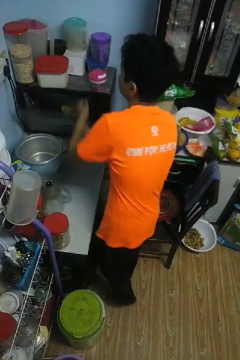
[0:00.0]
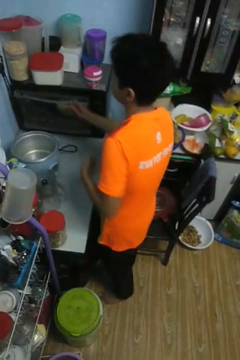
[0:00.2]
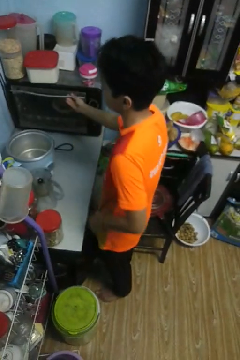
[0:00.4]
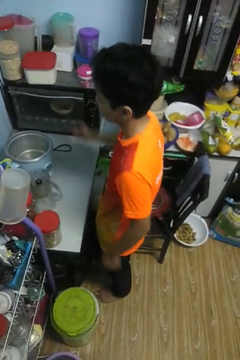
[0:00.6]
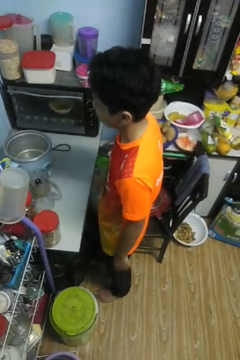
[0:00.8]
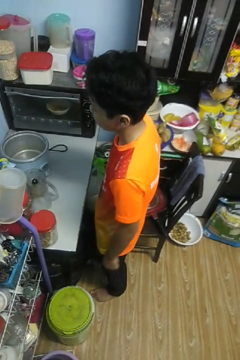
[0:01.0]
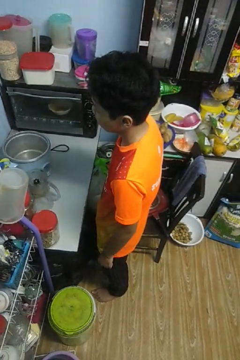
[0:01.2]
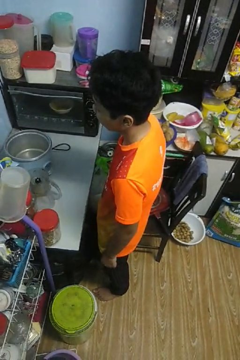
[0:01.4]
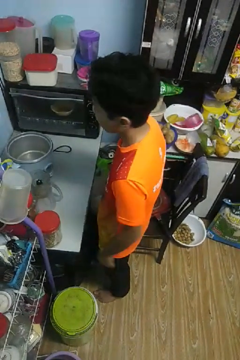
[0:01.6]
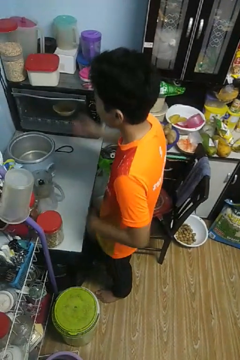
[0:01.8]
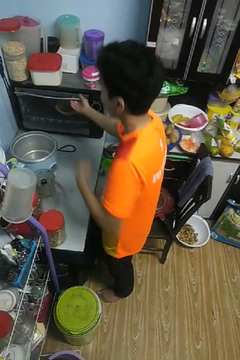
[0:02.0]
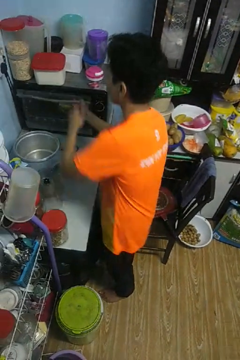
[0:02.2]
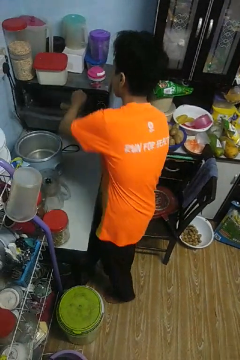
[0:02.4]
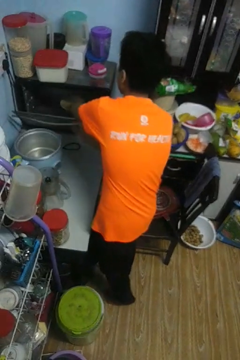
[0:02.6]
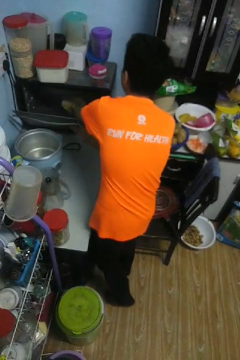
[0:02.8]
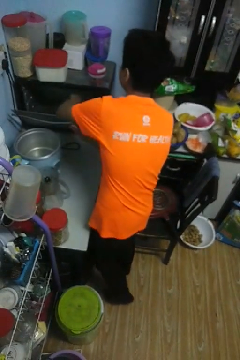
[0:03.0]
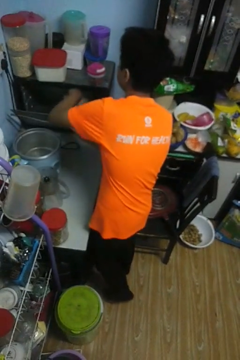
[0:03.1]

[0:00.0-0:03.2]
person takes object from oven

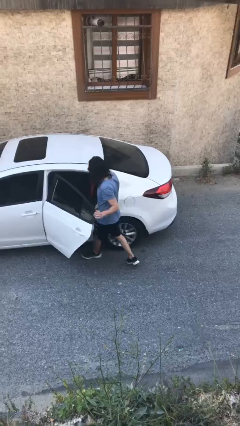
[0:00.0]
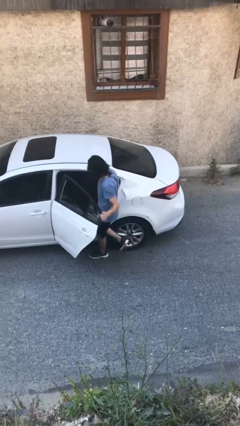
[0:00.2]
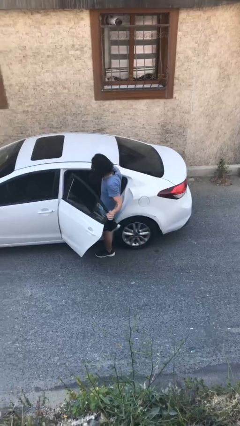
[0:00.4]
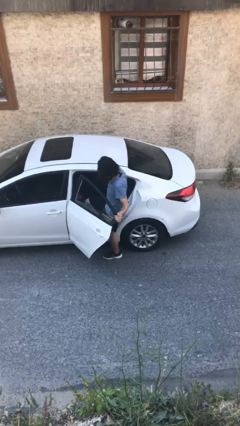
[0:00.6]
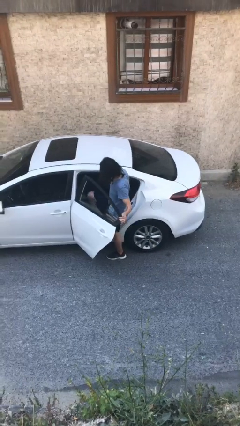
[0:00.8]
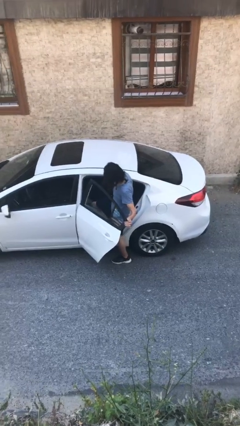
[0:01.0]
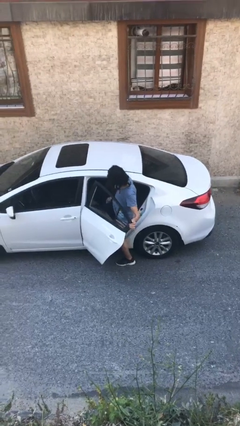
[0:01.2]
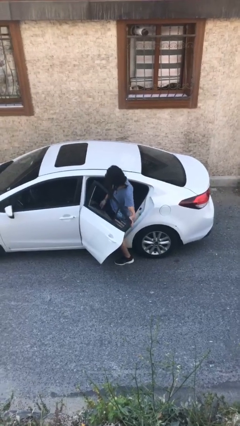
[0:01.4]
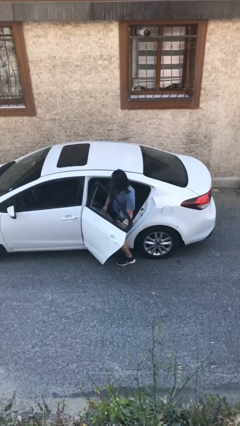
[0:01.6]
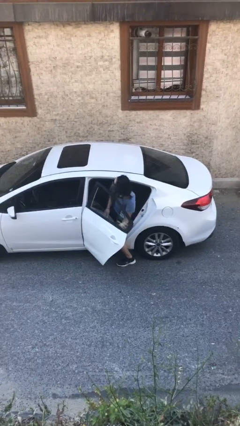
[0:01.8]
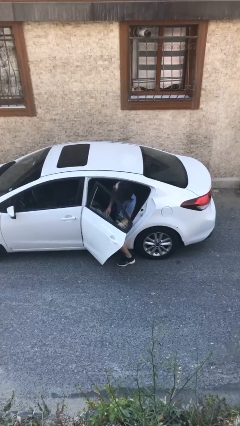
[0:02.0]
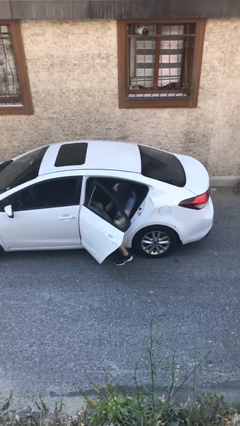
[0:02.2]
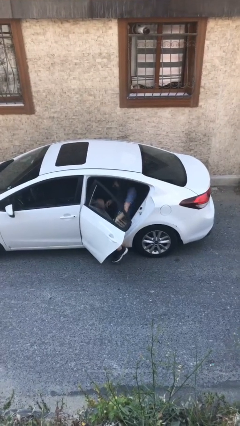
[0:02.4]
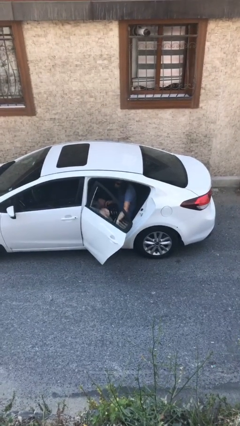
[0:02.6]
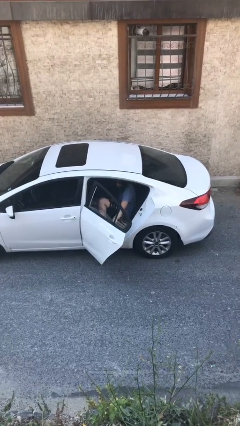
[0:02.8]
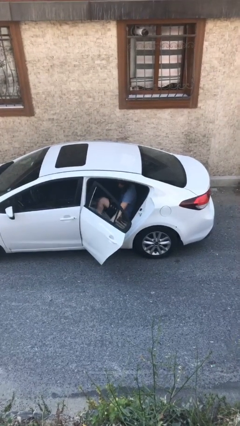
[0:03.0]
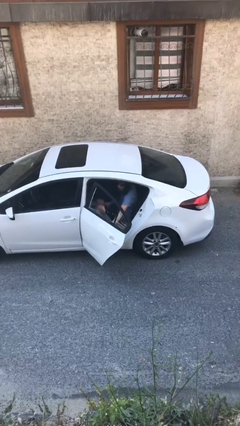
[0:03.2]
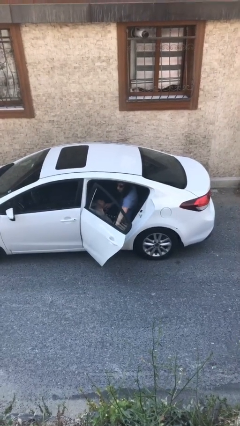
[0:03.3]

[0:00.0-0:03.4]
person enters car

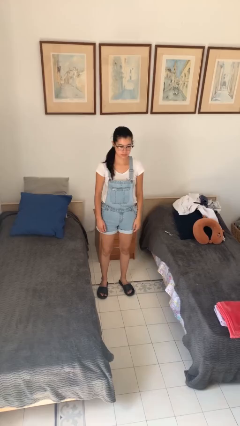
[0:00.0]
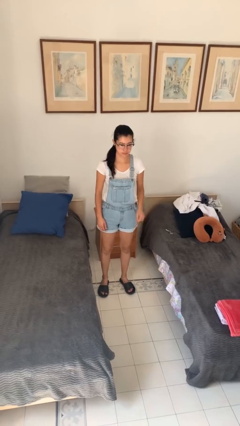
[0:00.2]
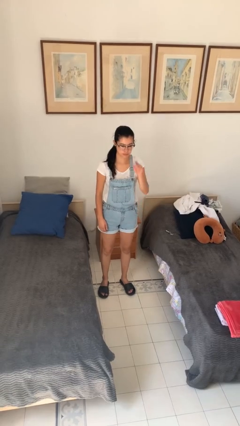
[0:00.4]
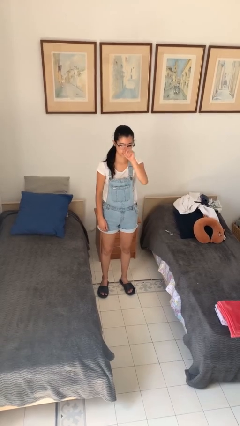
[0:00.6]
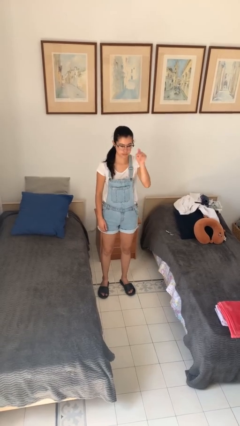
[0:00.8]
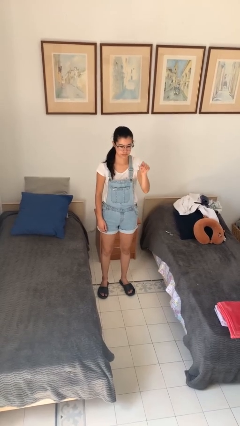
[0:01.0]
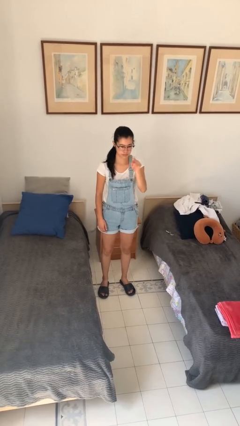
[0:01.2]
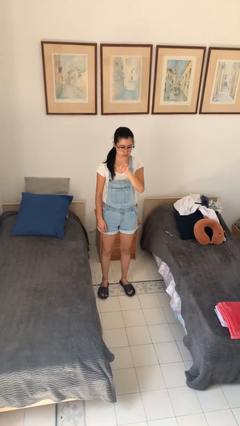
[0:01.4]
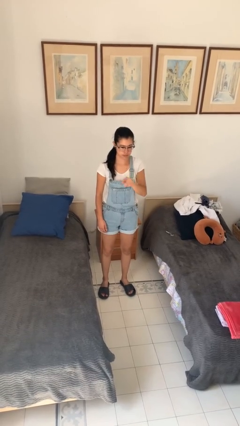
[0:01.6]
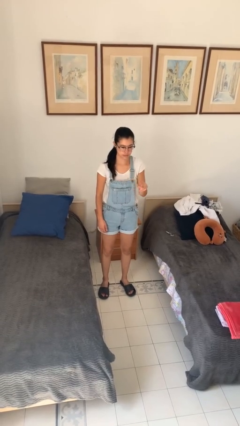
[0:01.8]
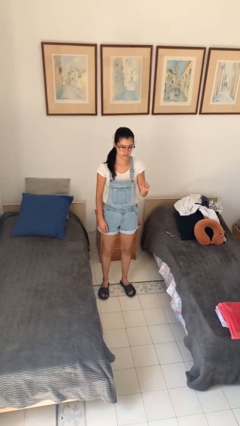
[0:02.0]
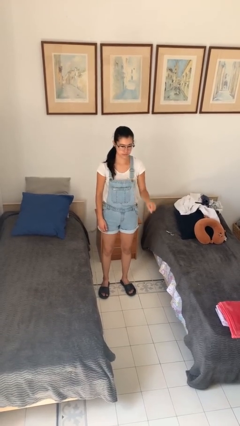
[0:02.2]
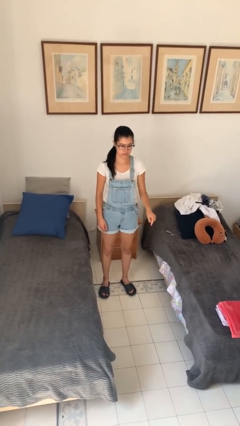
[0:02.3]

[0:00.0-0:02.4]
person gestures number five

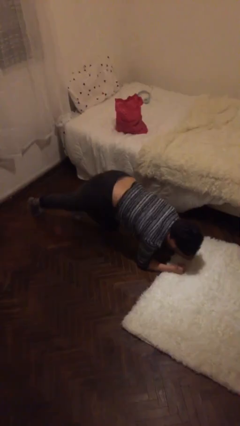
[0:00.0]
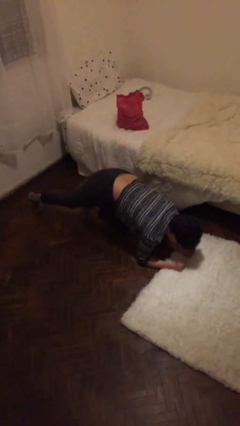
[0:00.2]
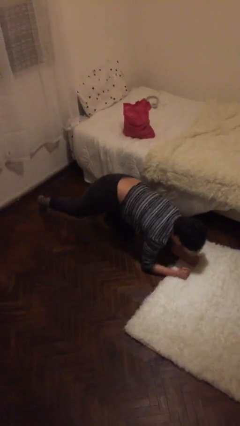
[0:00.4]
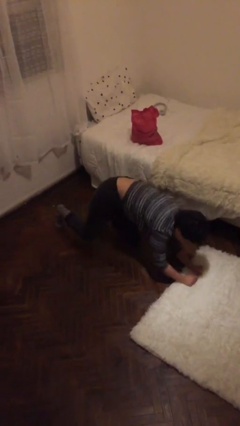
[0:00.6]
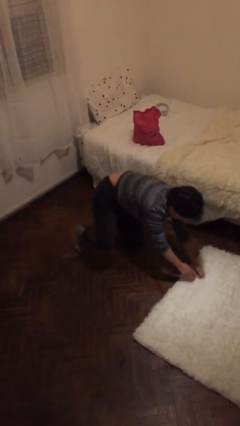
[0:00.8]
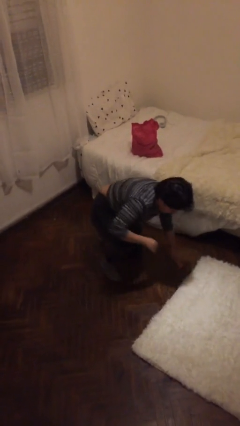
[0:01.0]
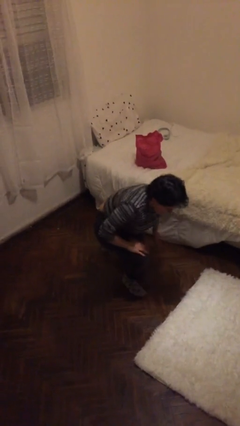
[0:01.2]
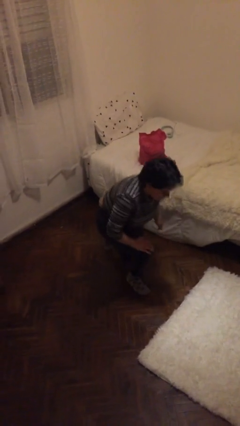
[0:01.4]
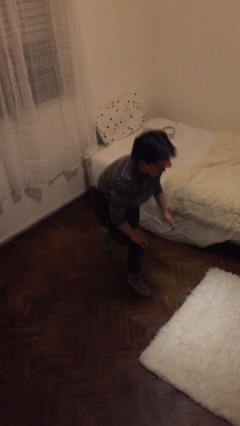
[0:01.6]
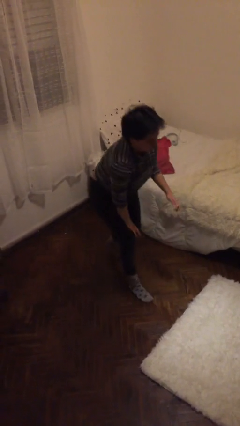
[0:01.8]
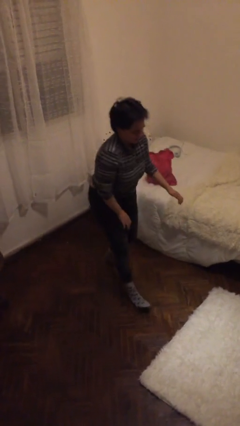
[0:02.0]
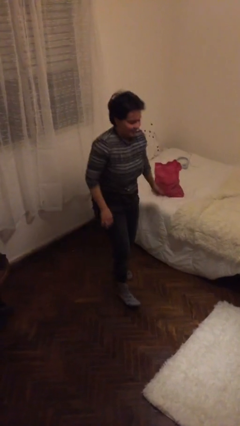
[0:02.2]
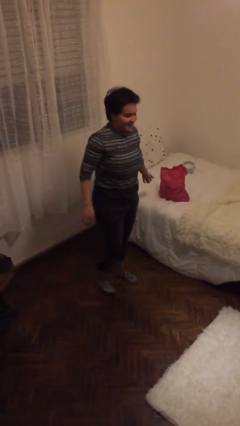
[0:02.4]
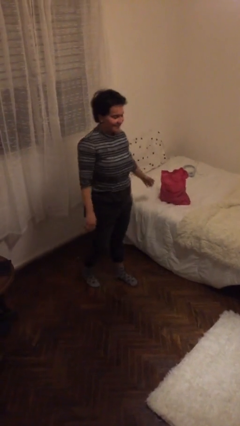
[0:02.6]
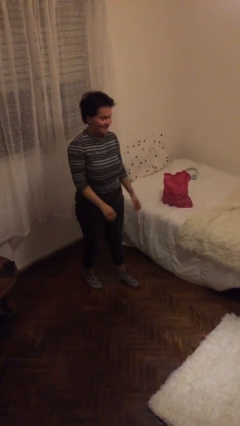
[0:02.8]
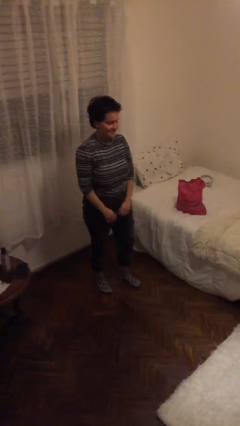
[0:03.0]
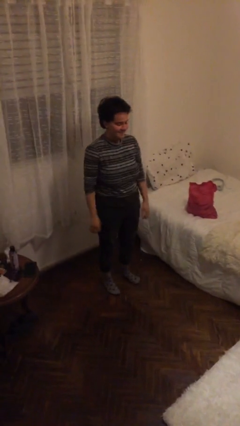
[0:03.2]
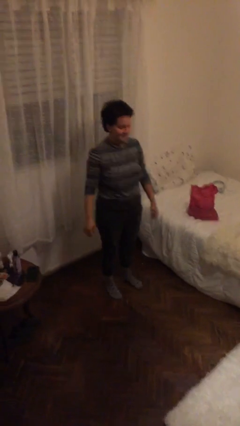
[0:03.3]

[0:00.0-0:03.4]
person stands up from floor

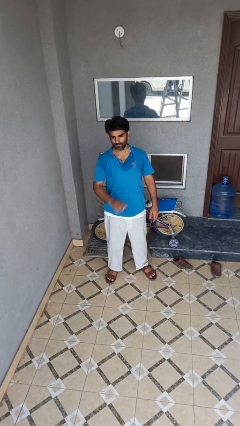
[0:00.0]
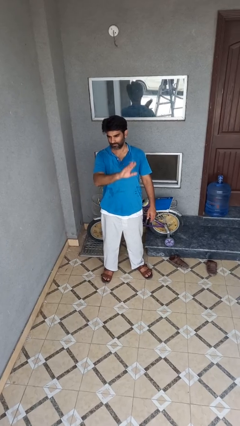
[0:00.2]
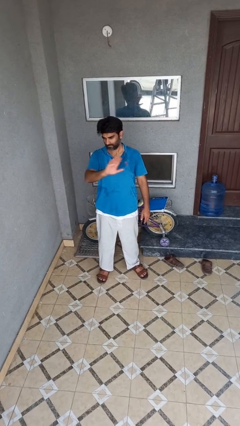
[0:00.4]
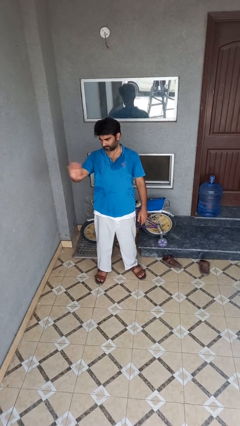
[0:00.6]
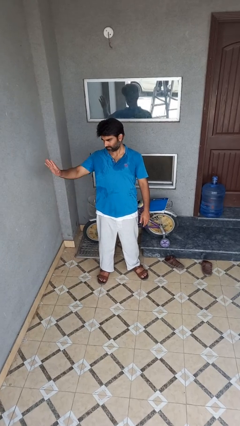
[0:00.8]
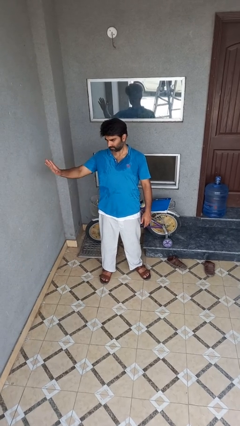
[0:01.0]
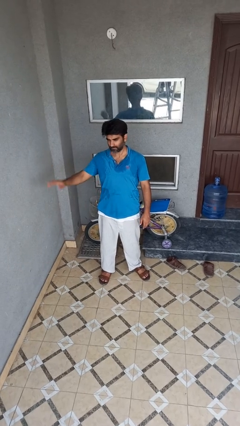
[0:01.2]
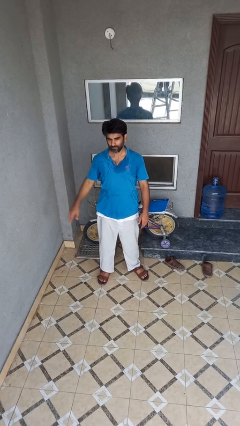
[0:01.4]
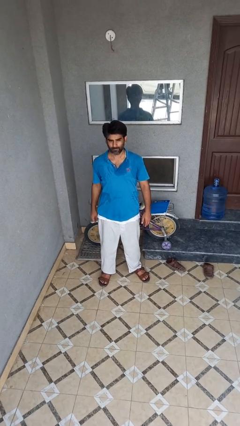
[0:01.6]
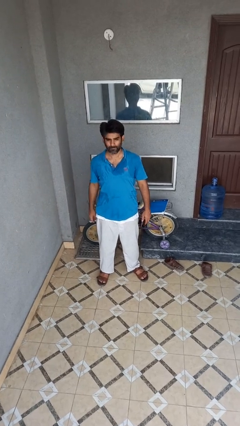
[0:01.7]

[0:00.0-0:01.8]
person gestures swipe right

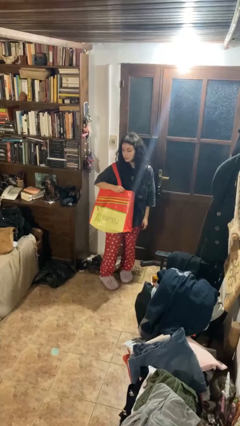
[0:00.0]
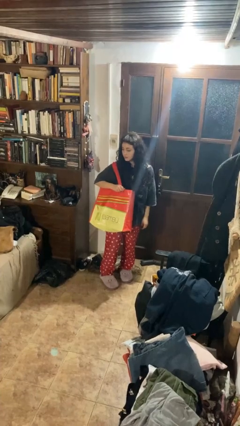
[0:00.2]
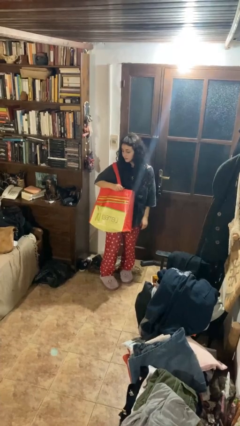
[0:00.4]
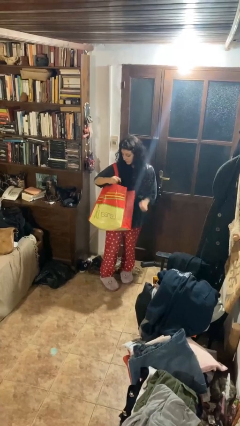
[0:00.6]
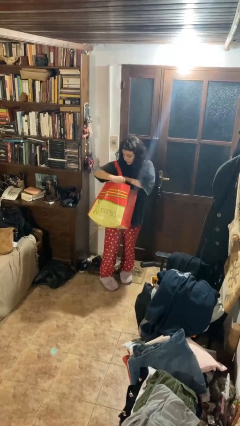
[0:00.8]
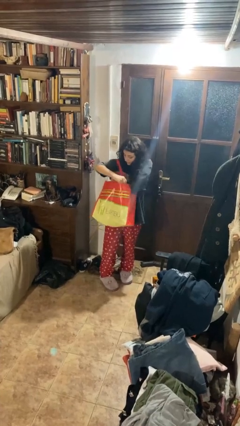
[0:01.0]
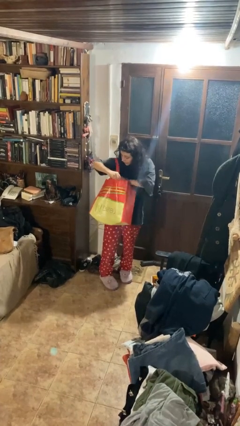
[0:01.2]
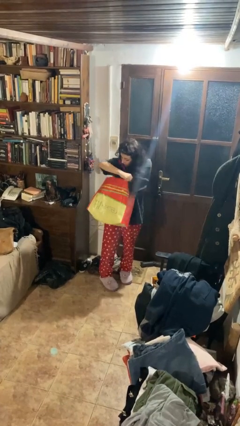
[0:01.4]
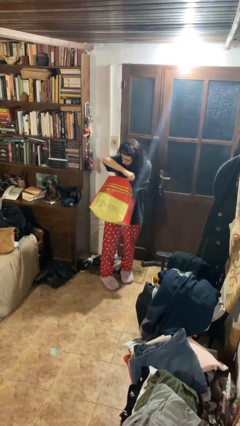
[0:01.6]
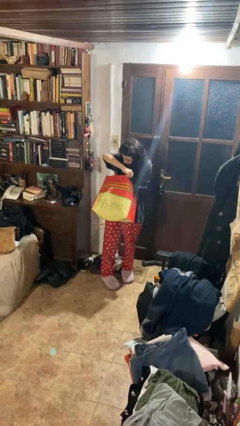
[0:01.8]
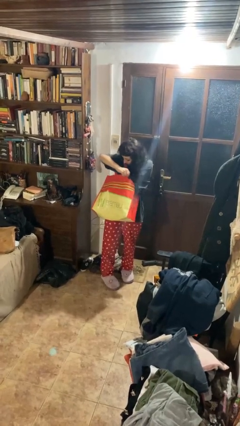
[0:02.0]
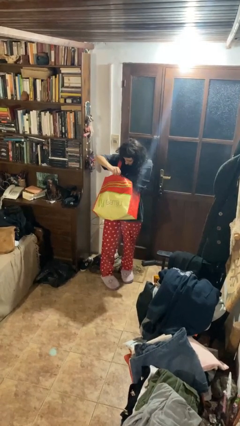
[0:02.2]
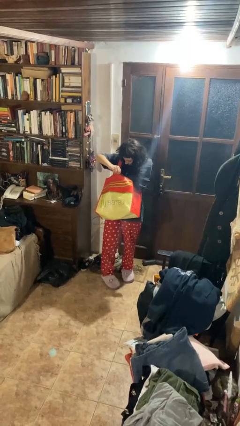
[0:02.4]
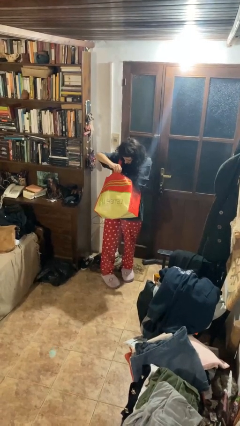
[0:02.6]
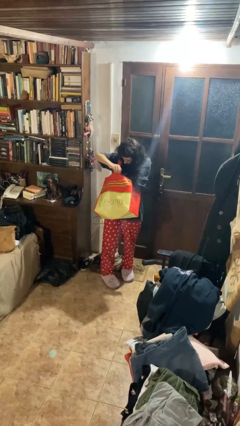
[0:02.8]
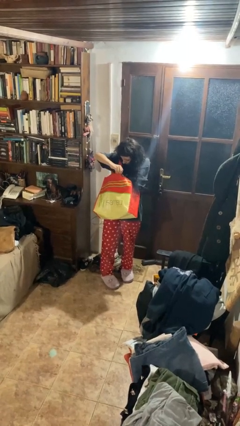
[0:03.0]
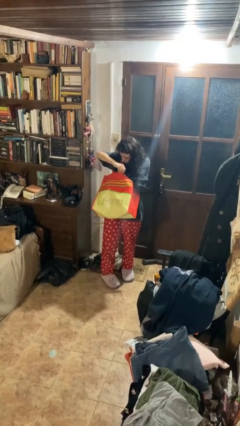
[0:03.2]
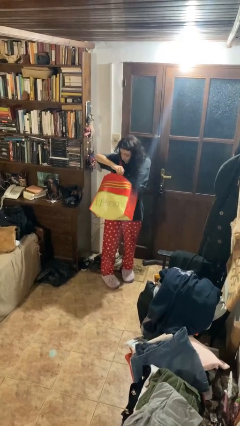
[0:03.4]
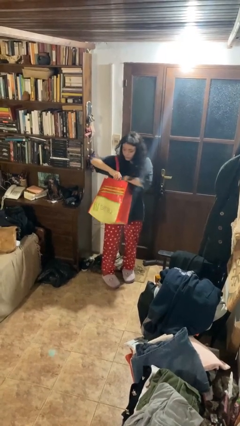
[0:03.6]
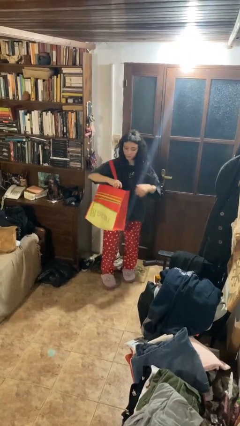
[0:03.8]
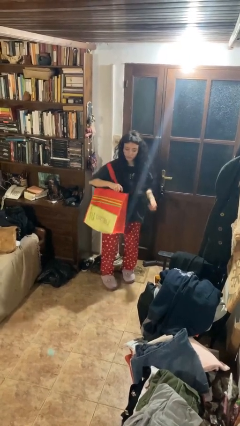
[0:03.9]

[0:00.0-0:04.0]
person searches in bag

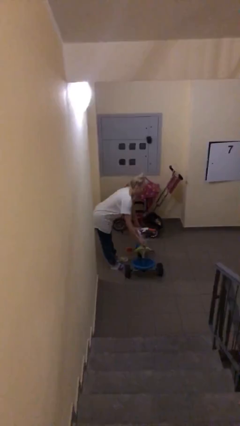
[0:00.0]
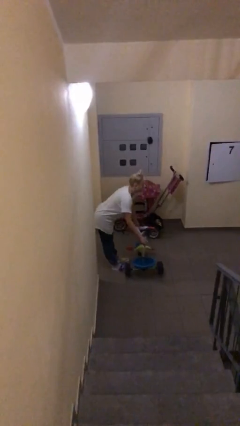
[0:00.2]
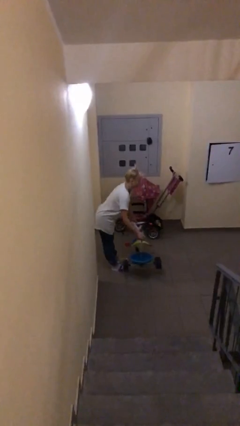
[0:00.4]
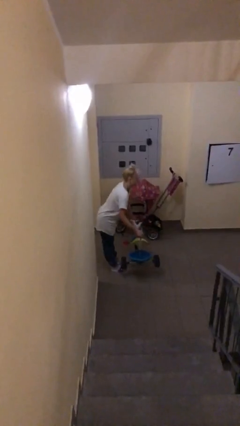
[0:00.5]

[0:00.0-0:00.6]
person picks up object from floor
